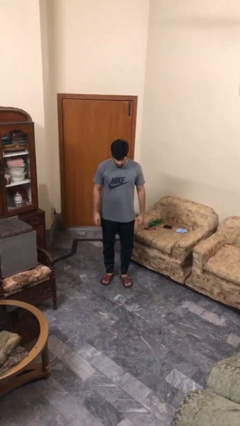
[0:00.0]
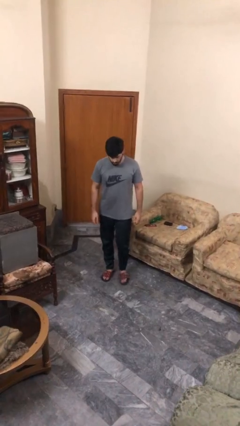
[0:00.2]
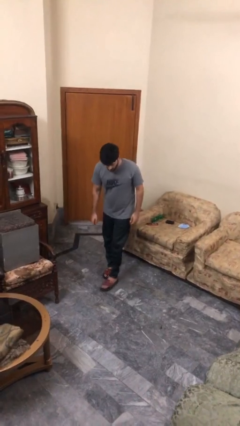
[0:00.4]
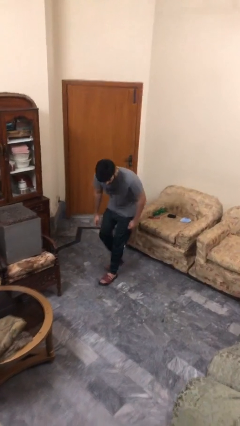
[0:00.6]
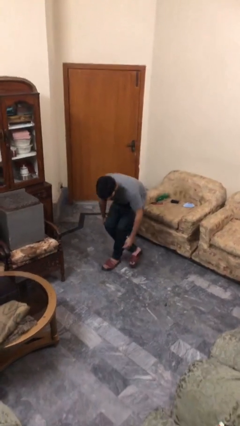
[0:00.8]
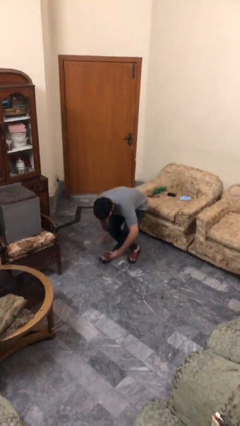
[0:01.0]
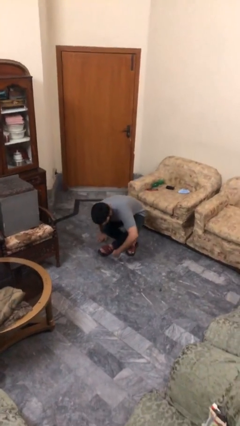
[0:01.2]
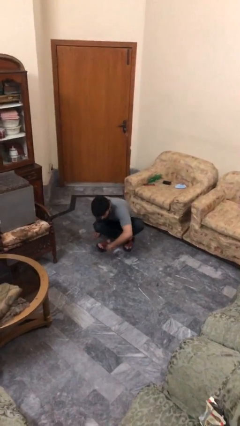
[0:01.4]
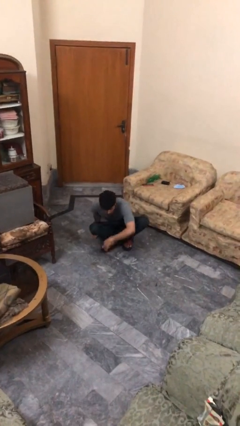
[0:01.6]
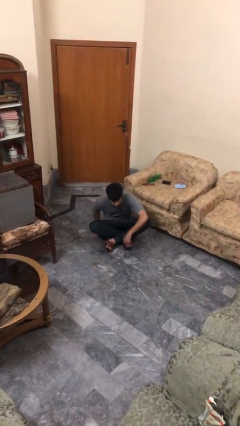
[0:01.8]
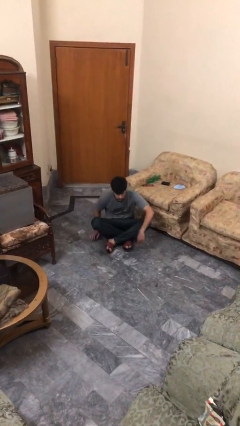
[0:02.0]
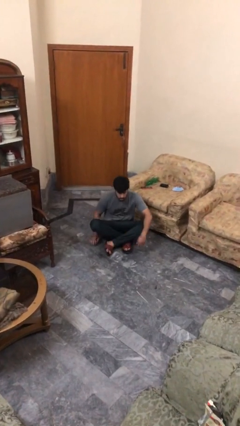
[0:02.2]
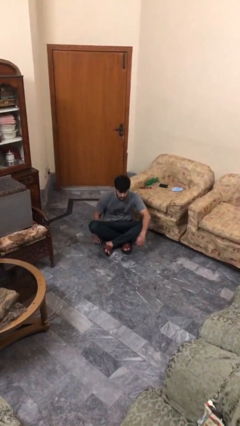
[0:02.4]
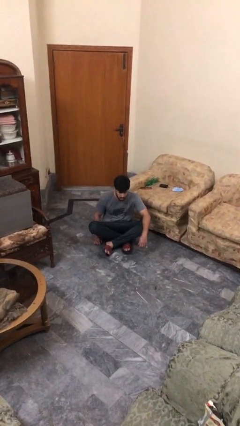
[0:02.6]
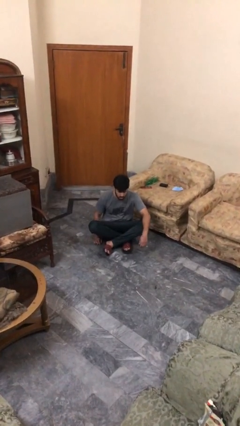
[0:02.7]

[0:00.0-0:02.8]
person sits crisscross

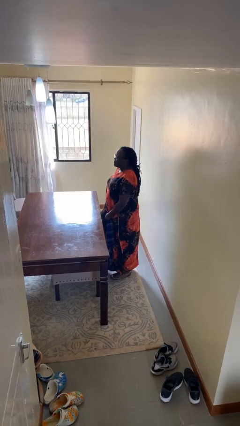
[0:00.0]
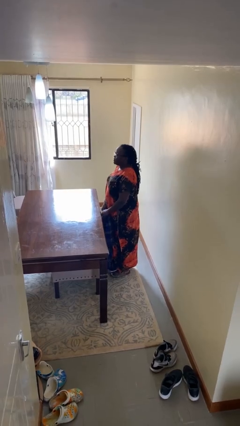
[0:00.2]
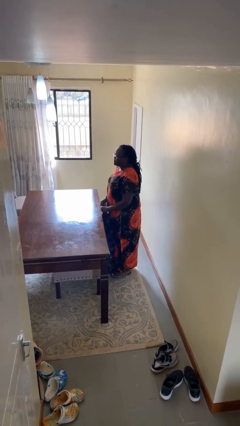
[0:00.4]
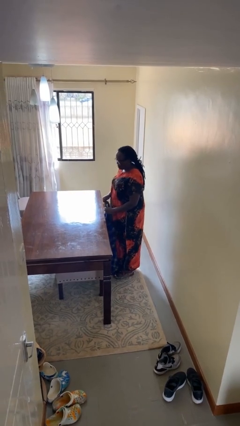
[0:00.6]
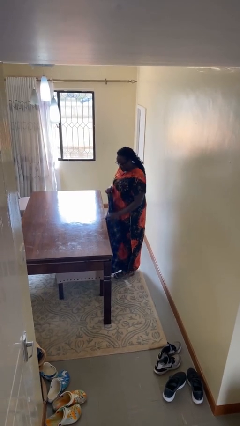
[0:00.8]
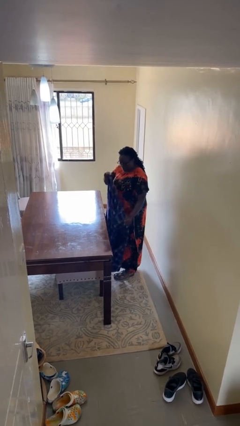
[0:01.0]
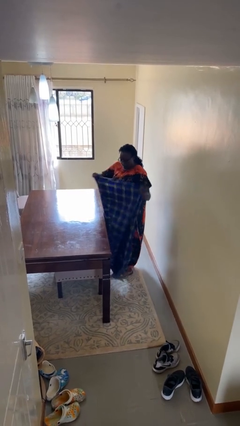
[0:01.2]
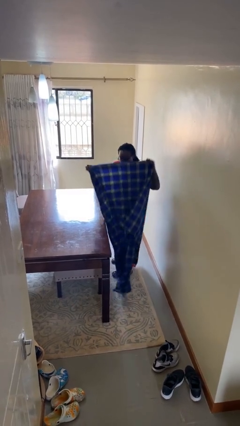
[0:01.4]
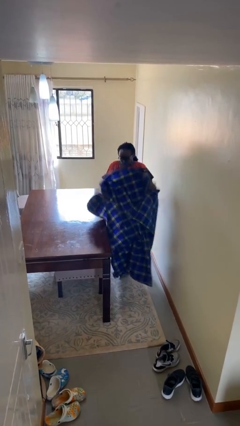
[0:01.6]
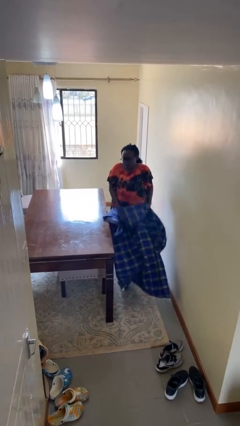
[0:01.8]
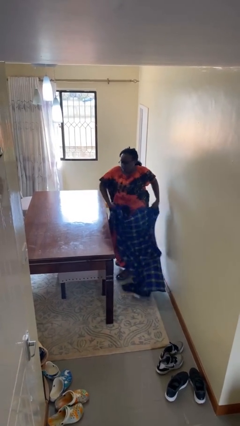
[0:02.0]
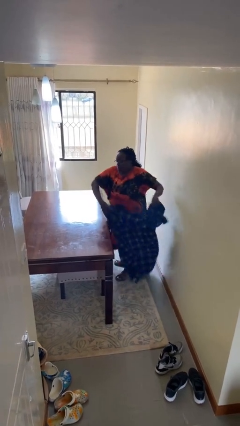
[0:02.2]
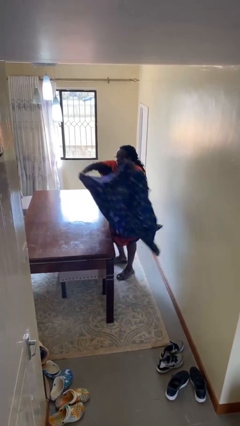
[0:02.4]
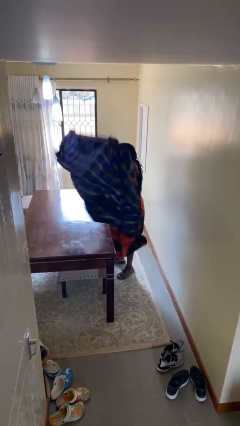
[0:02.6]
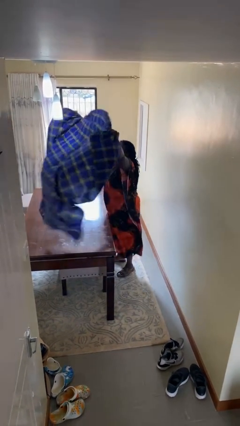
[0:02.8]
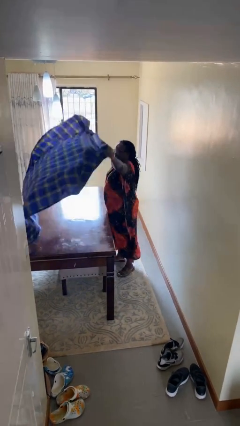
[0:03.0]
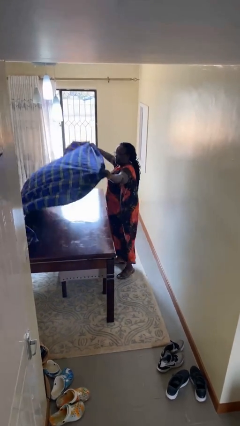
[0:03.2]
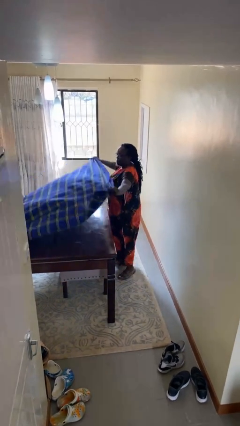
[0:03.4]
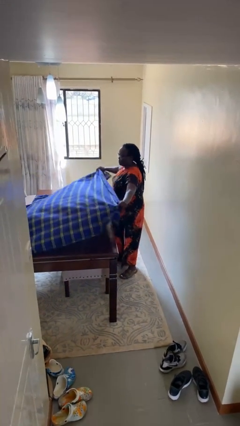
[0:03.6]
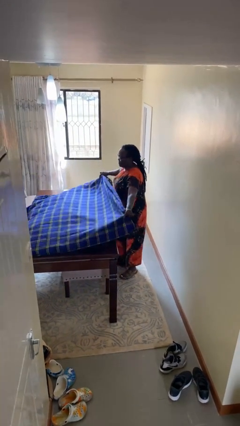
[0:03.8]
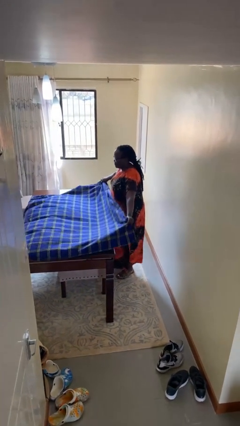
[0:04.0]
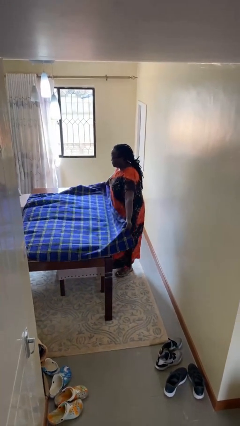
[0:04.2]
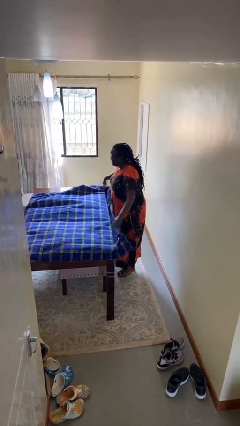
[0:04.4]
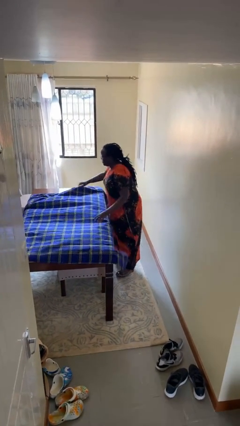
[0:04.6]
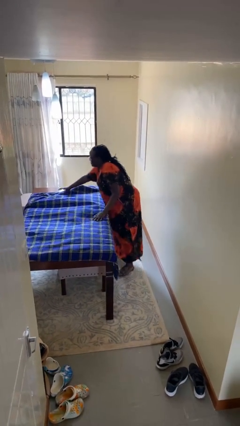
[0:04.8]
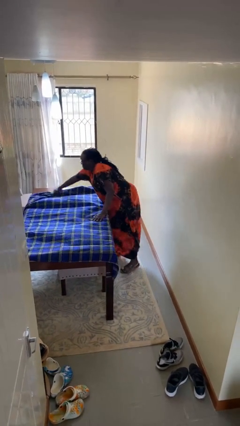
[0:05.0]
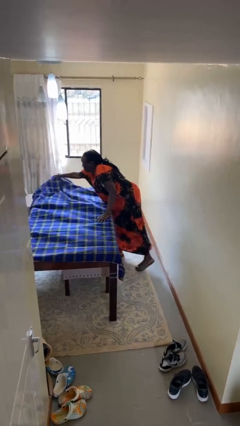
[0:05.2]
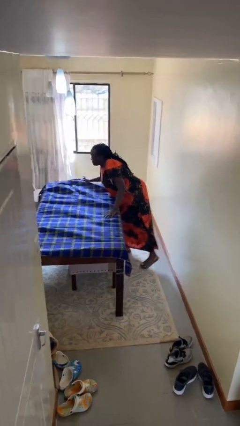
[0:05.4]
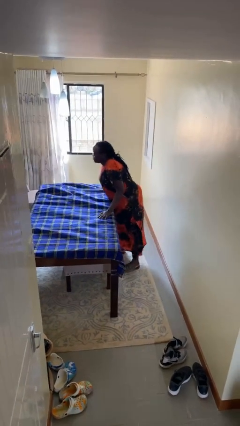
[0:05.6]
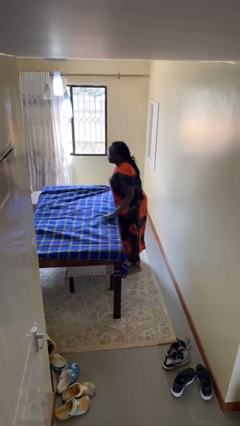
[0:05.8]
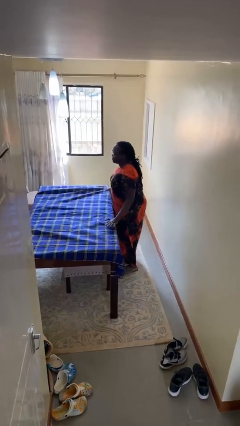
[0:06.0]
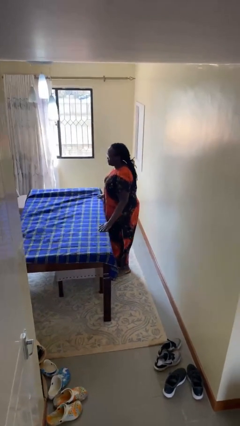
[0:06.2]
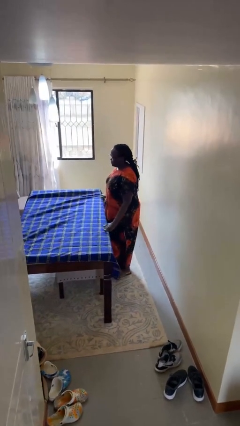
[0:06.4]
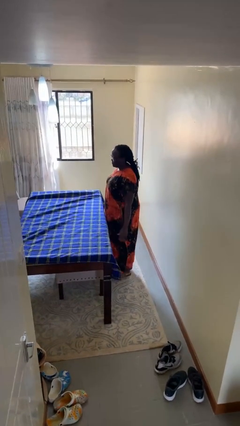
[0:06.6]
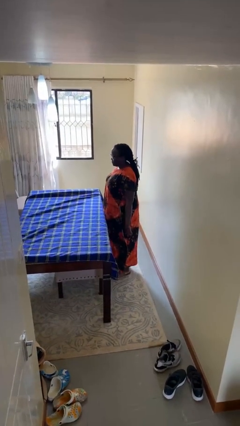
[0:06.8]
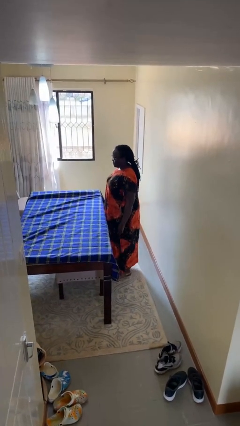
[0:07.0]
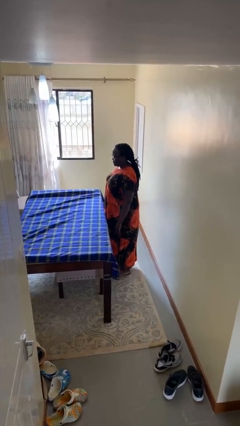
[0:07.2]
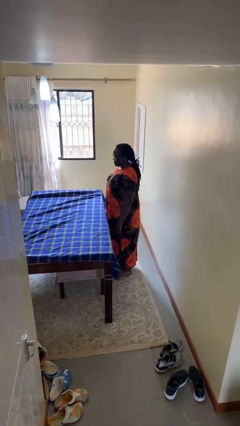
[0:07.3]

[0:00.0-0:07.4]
person spreads tablecloth

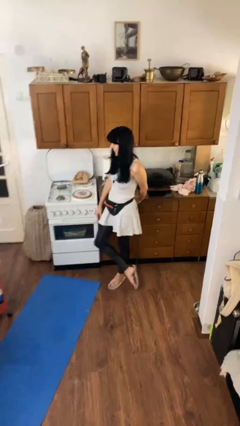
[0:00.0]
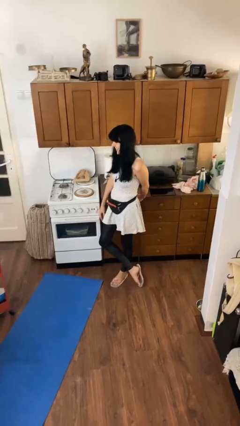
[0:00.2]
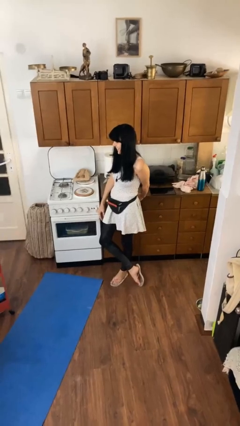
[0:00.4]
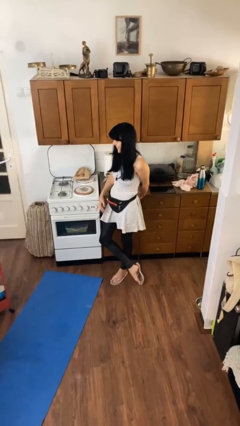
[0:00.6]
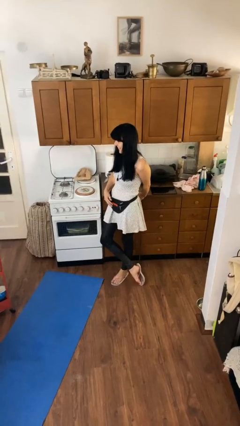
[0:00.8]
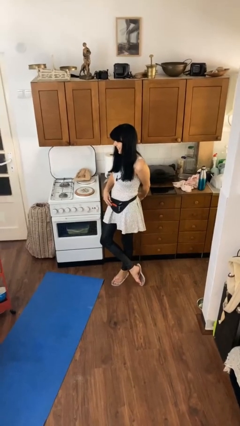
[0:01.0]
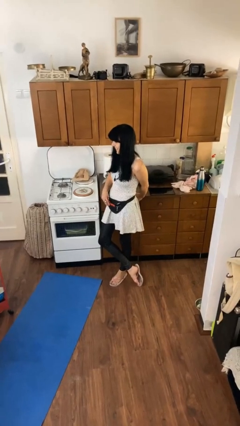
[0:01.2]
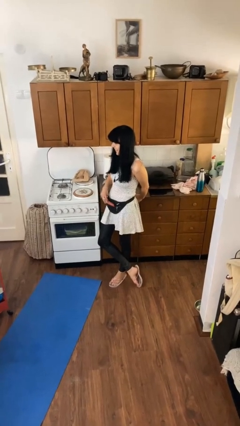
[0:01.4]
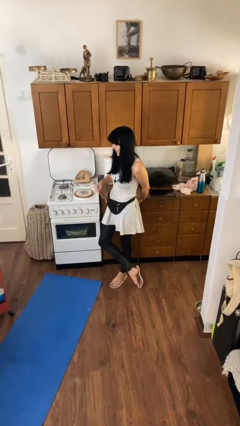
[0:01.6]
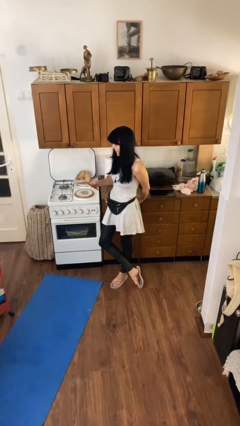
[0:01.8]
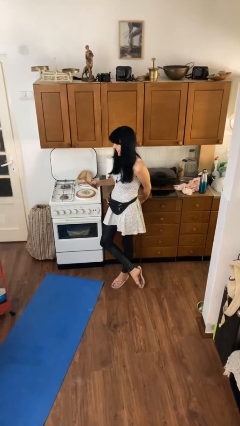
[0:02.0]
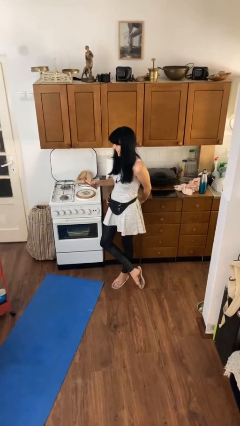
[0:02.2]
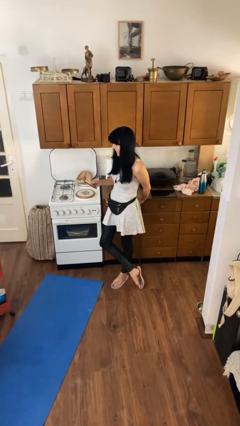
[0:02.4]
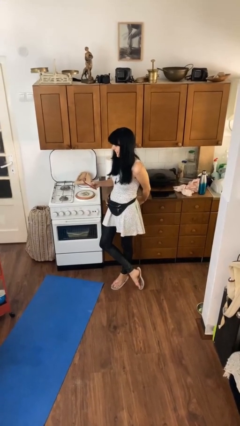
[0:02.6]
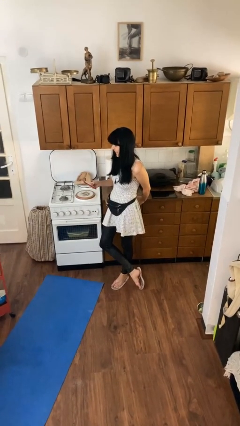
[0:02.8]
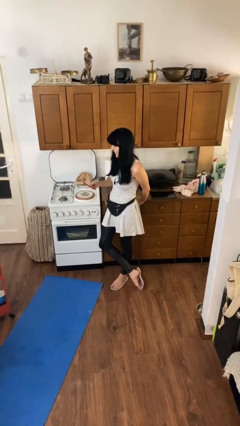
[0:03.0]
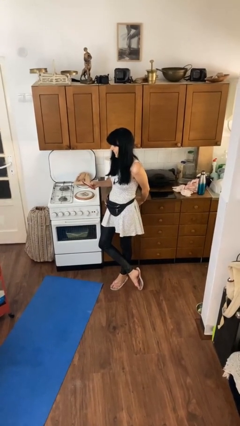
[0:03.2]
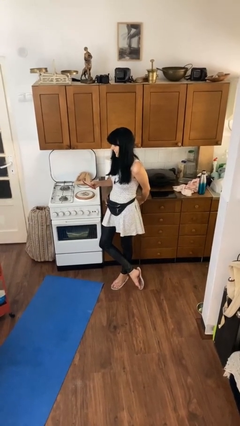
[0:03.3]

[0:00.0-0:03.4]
person takes phone from pocket

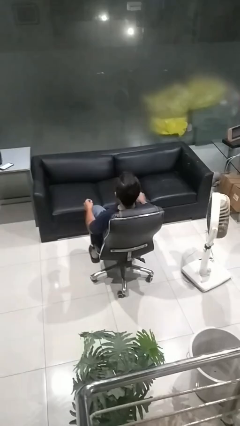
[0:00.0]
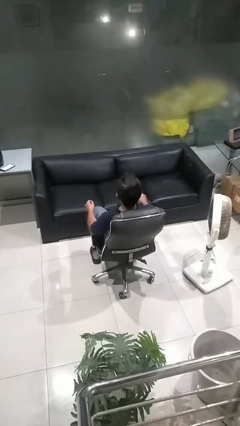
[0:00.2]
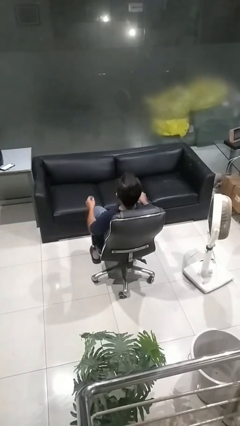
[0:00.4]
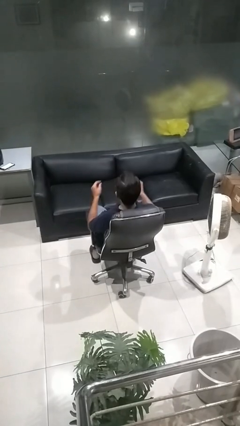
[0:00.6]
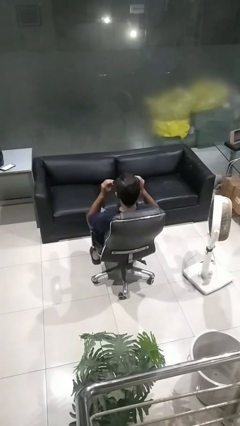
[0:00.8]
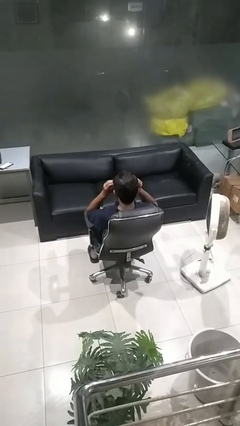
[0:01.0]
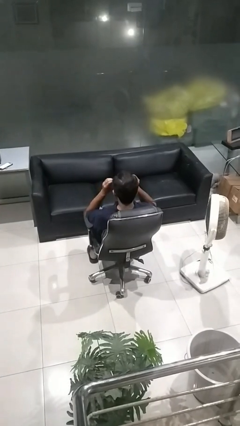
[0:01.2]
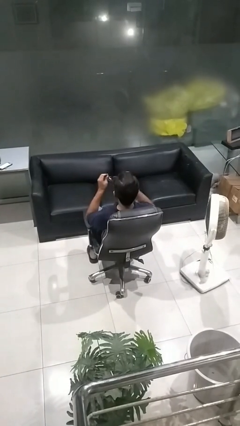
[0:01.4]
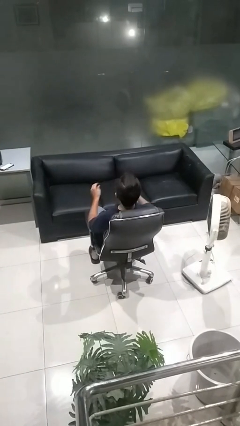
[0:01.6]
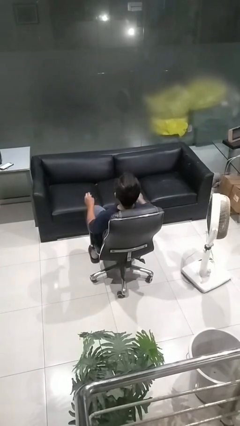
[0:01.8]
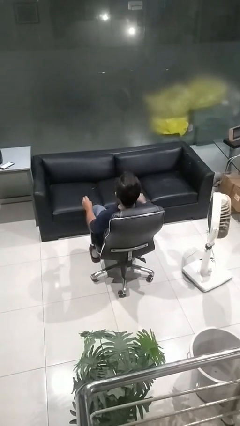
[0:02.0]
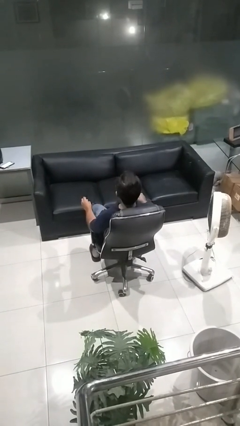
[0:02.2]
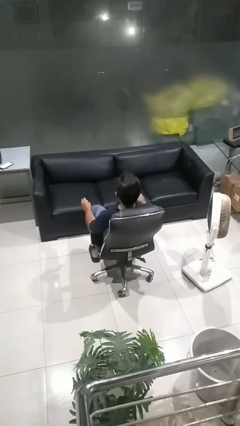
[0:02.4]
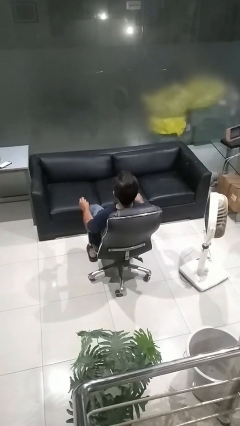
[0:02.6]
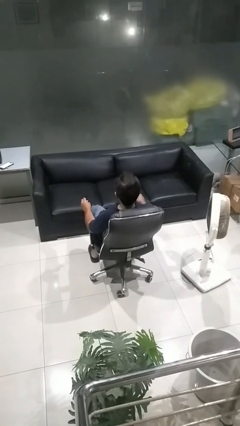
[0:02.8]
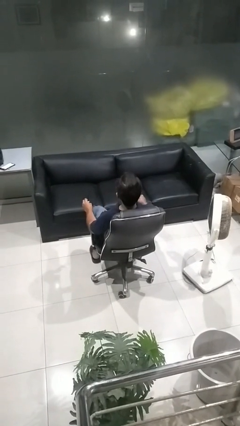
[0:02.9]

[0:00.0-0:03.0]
person takes off sunglasses

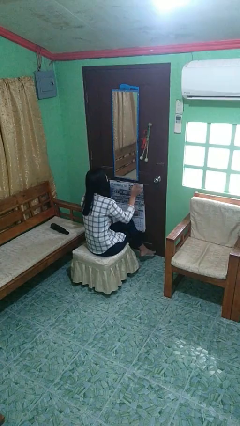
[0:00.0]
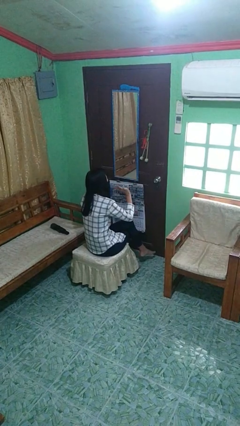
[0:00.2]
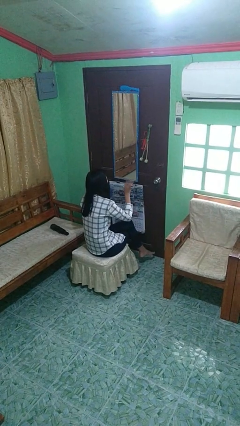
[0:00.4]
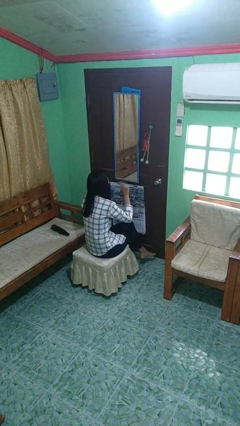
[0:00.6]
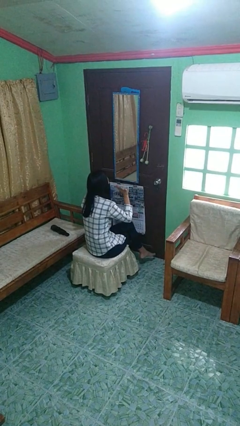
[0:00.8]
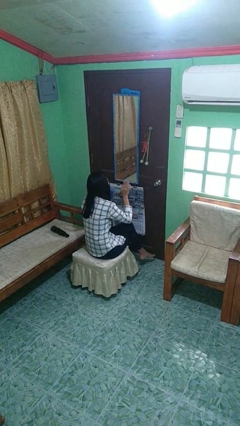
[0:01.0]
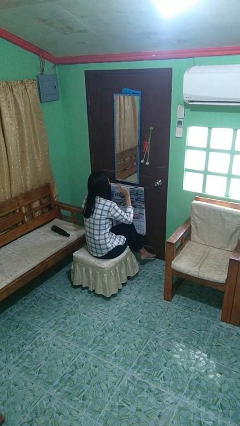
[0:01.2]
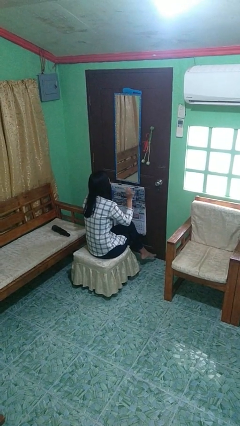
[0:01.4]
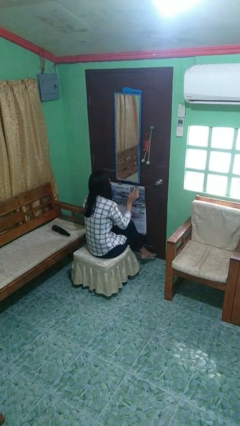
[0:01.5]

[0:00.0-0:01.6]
person waves hand over object
